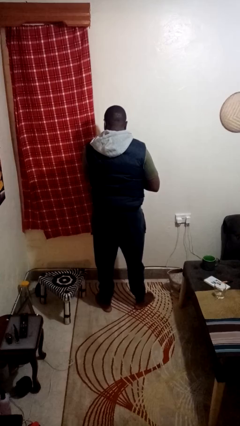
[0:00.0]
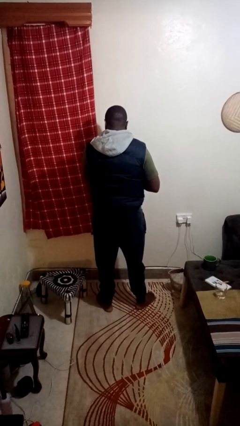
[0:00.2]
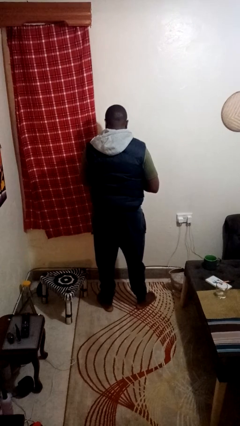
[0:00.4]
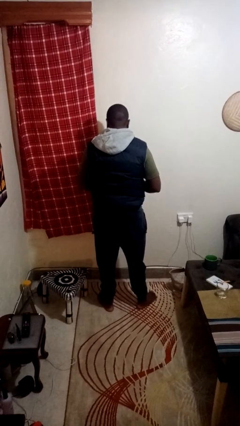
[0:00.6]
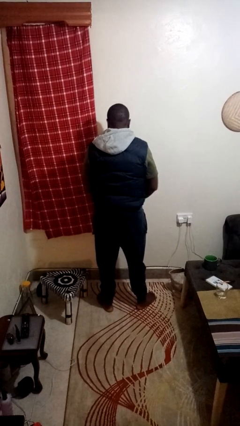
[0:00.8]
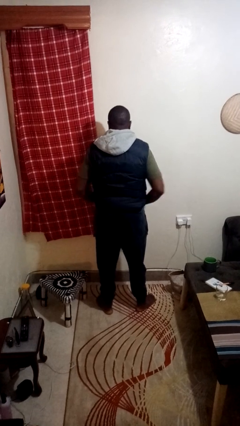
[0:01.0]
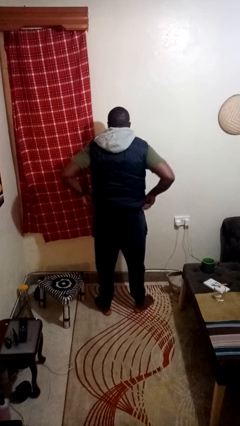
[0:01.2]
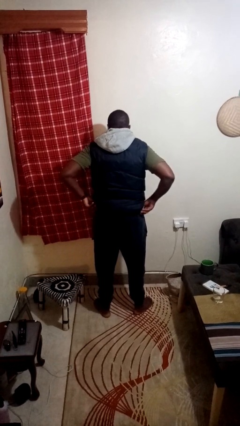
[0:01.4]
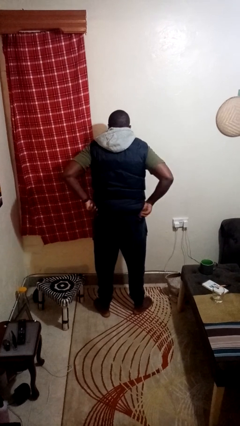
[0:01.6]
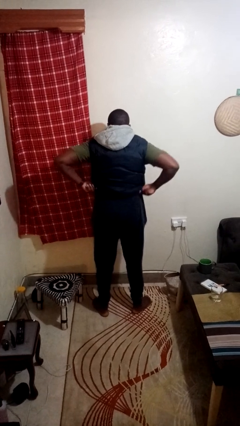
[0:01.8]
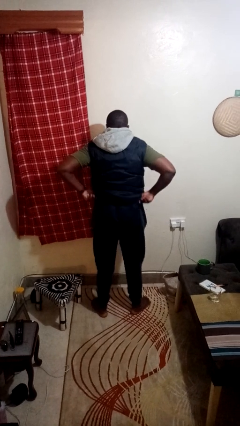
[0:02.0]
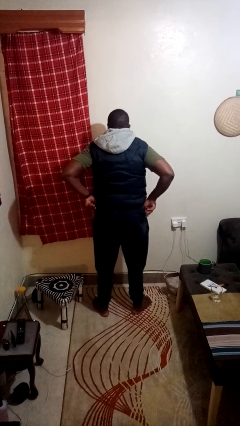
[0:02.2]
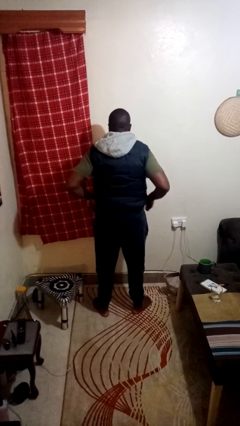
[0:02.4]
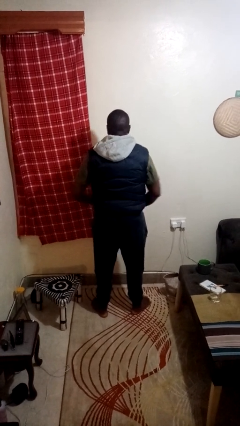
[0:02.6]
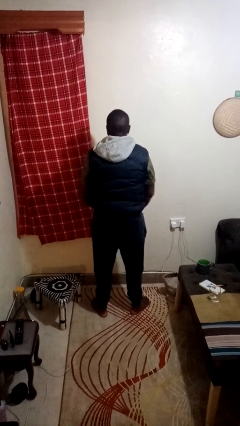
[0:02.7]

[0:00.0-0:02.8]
person hikes up pants

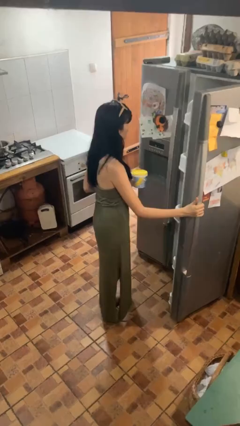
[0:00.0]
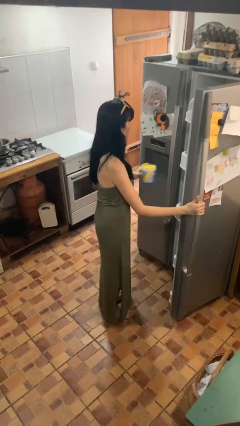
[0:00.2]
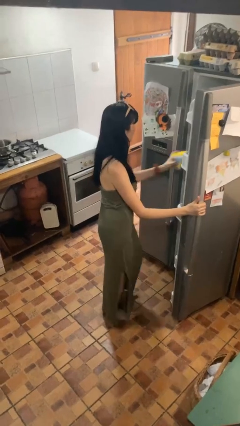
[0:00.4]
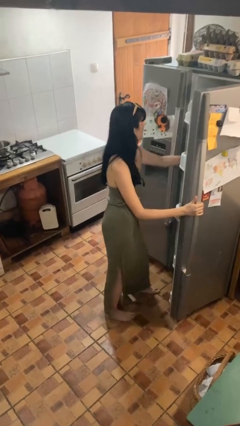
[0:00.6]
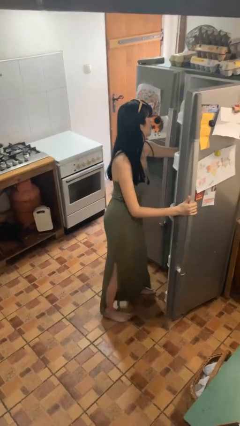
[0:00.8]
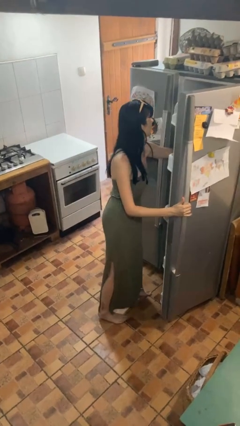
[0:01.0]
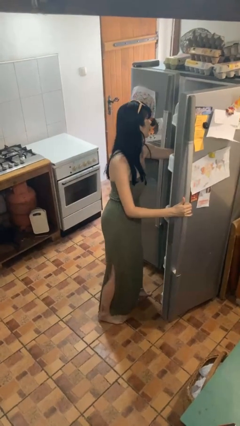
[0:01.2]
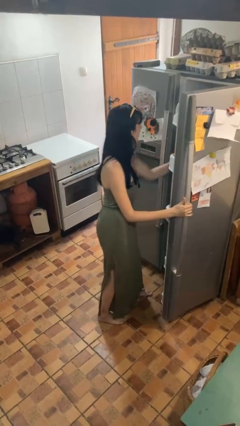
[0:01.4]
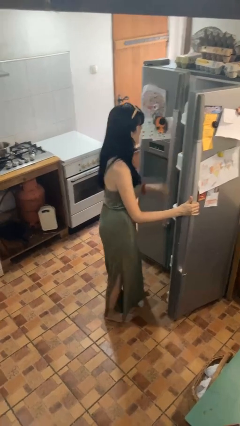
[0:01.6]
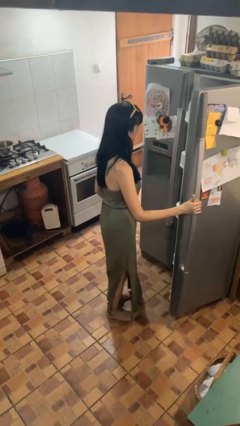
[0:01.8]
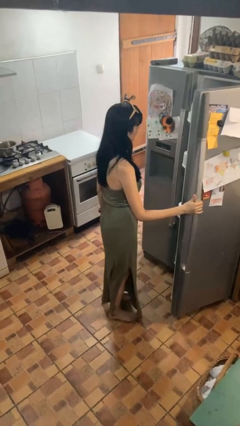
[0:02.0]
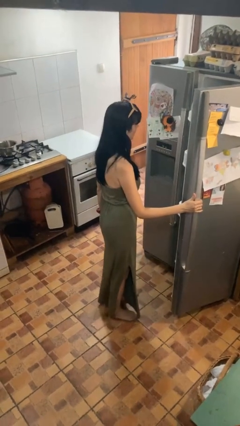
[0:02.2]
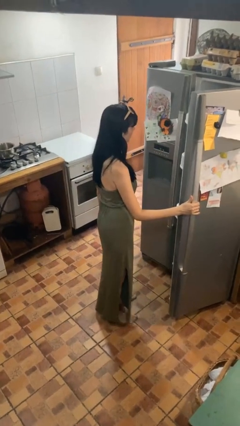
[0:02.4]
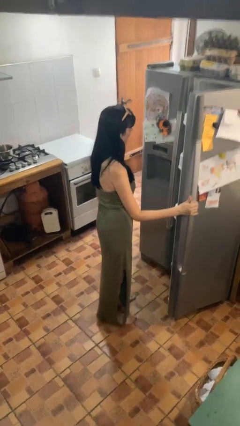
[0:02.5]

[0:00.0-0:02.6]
person puts object into refrigerator

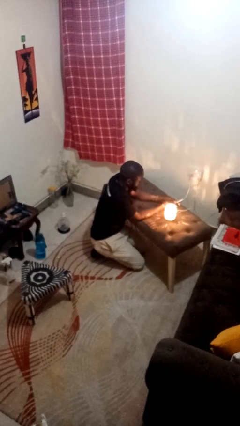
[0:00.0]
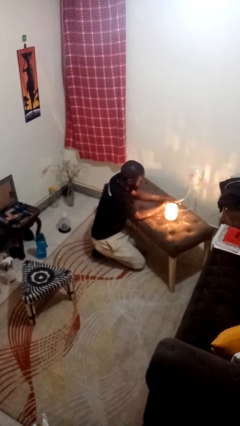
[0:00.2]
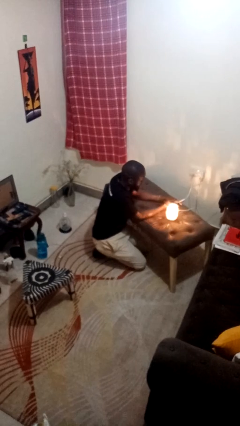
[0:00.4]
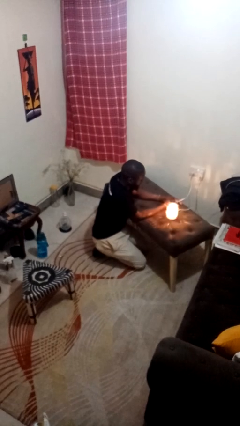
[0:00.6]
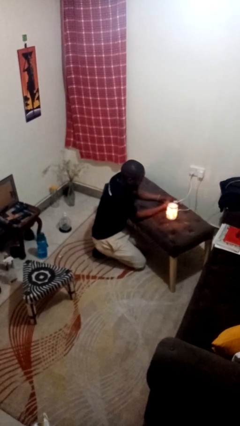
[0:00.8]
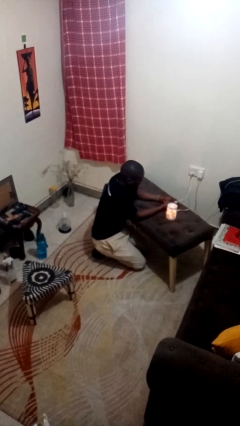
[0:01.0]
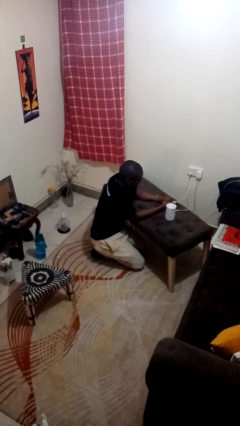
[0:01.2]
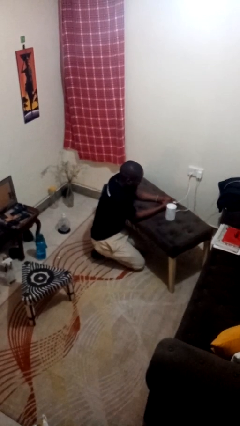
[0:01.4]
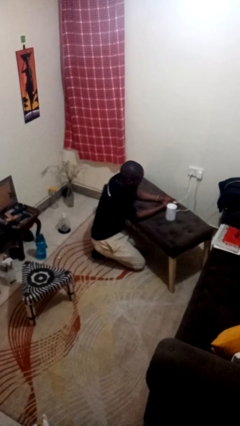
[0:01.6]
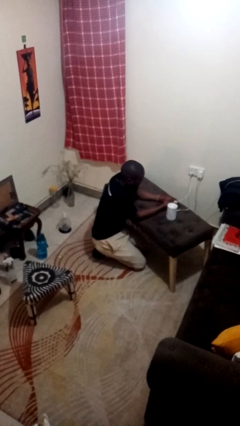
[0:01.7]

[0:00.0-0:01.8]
person turns off lamp

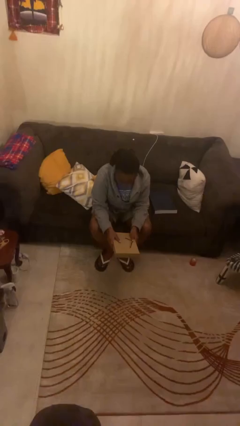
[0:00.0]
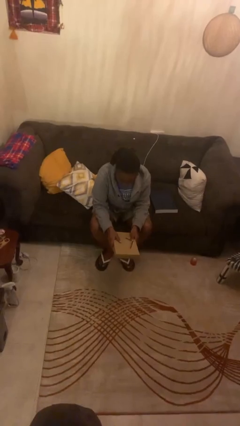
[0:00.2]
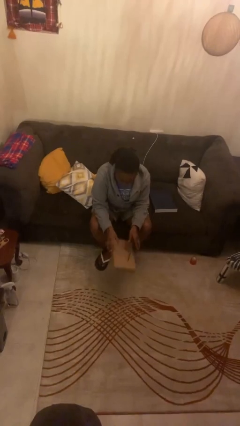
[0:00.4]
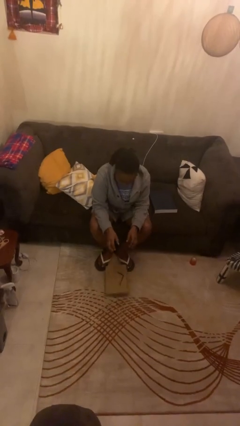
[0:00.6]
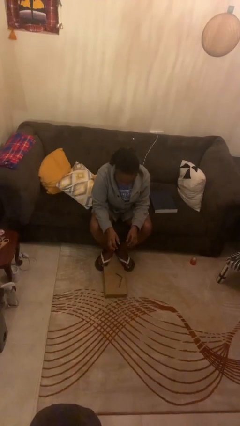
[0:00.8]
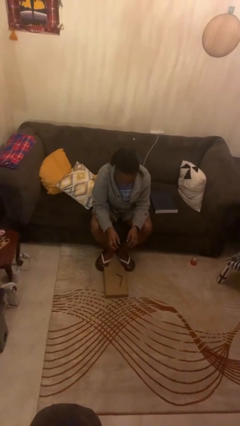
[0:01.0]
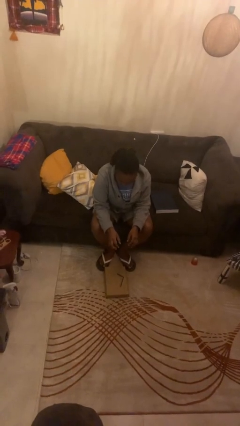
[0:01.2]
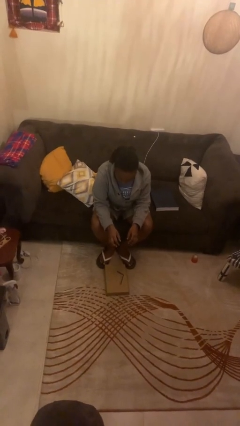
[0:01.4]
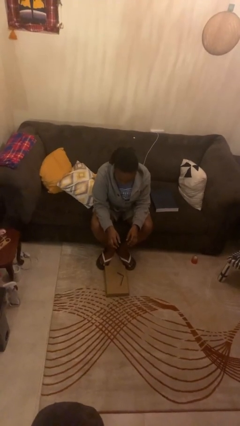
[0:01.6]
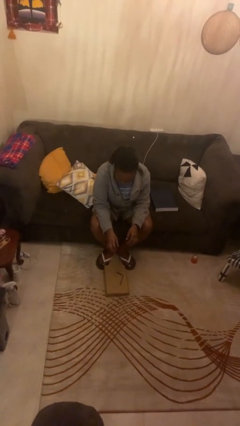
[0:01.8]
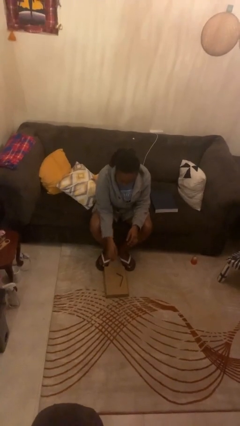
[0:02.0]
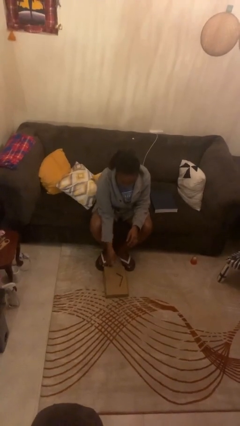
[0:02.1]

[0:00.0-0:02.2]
person drops object

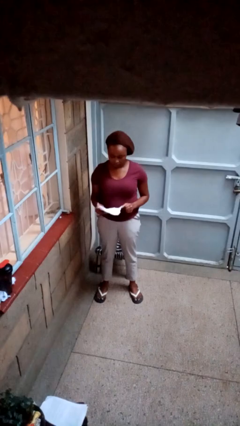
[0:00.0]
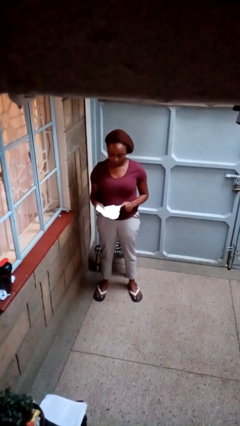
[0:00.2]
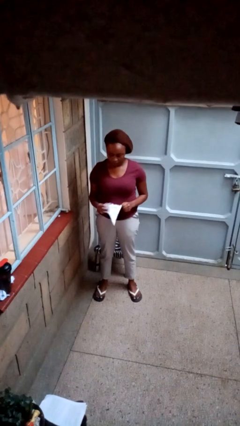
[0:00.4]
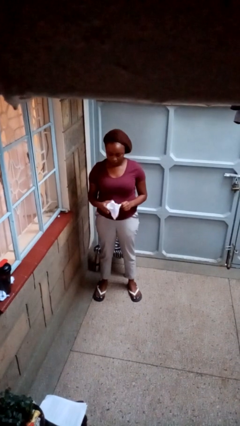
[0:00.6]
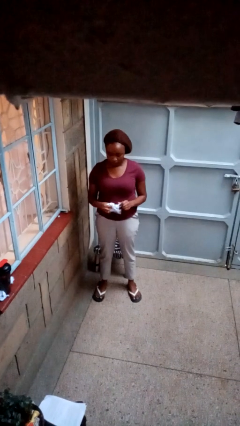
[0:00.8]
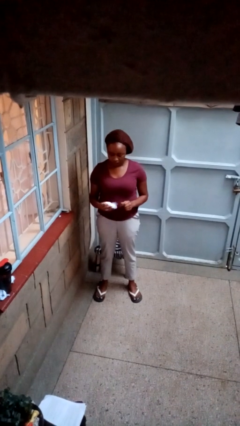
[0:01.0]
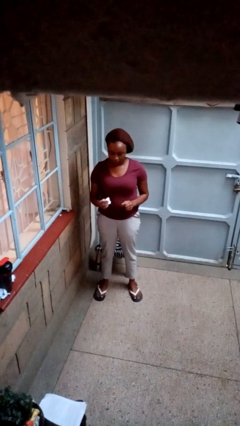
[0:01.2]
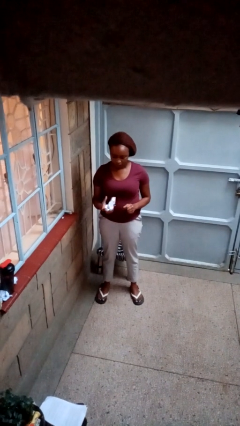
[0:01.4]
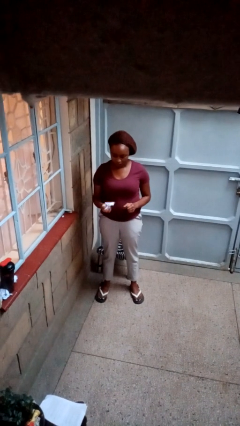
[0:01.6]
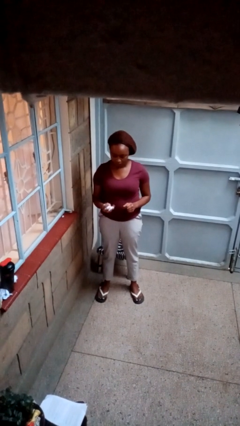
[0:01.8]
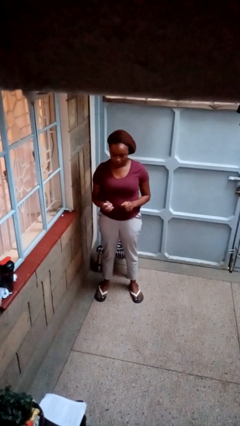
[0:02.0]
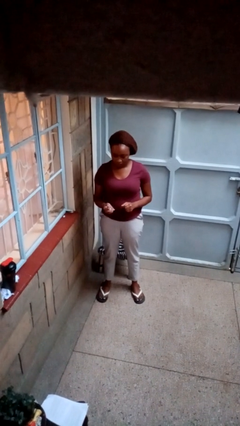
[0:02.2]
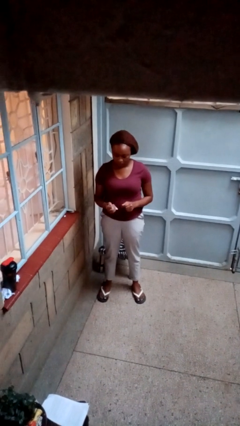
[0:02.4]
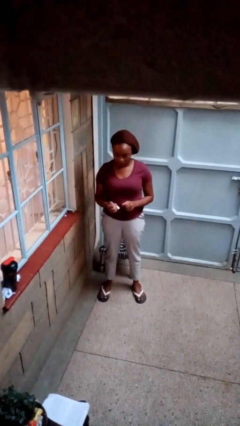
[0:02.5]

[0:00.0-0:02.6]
person crumples paper

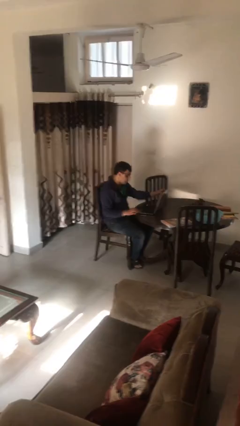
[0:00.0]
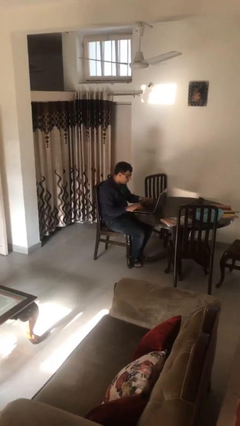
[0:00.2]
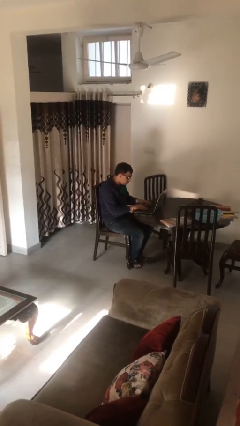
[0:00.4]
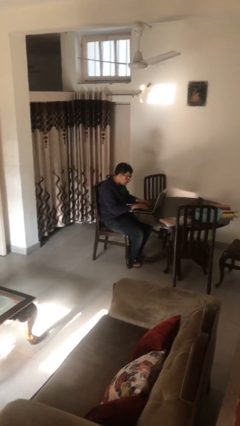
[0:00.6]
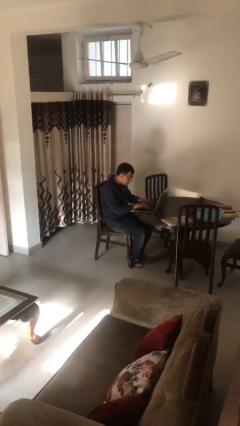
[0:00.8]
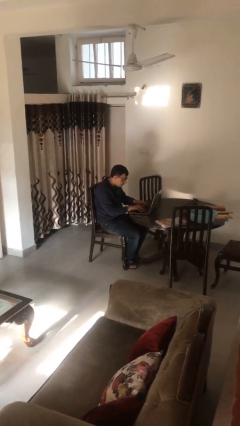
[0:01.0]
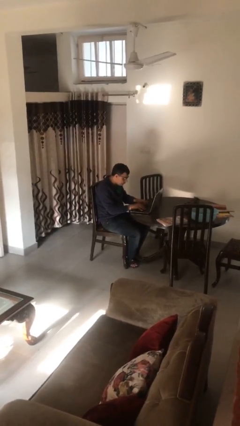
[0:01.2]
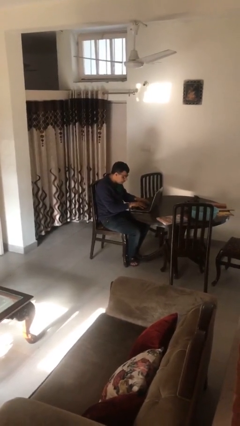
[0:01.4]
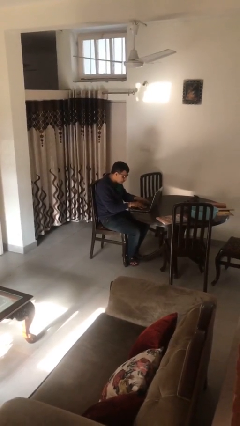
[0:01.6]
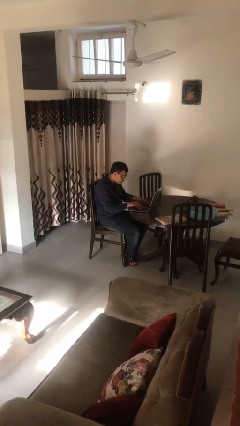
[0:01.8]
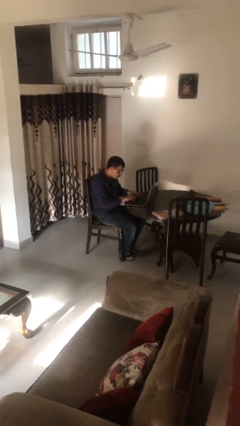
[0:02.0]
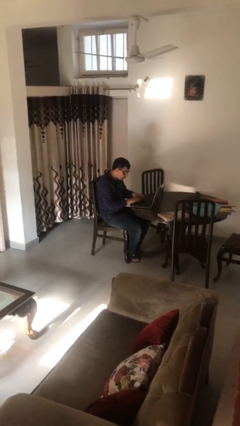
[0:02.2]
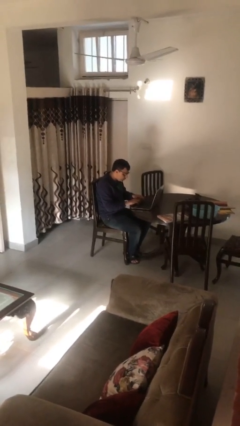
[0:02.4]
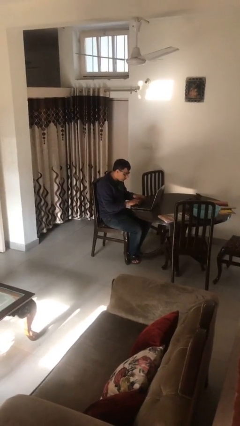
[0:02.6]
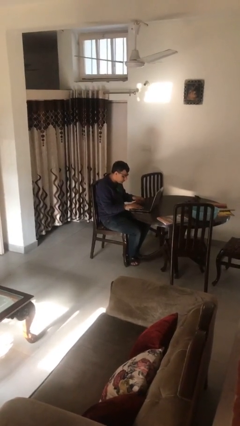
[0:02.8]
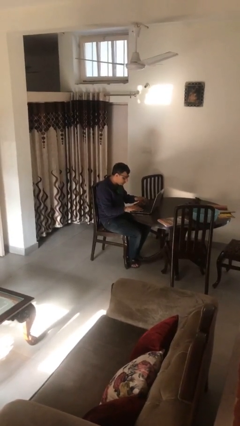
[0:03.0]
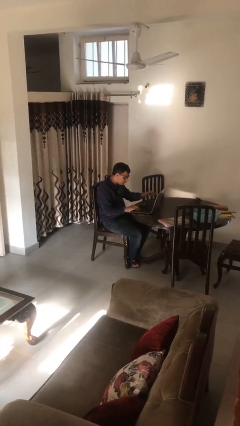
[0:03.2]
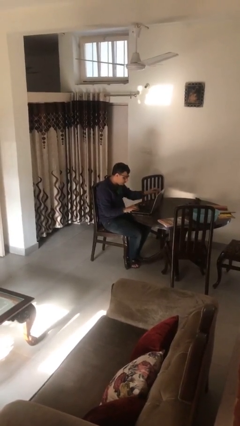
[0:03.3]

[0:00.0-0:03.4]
person interacts with laptop

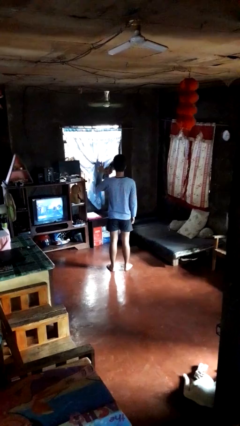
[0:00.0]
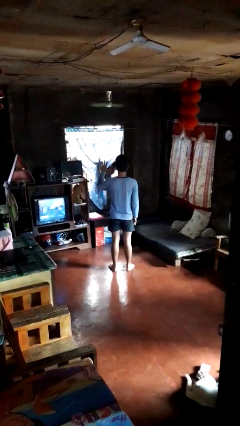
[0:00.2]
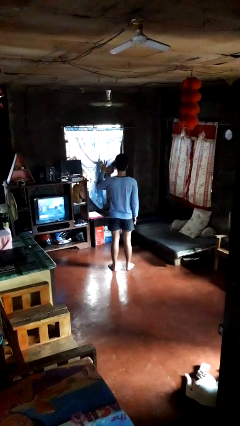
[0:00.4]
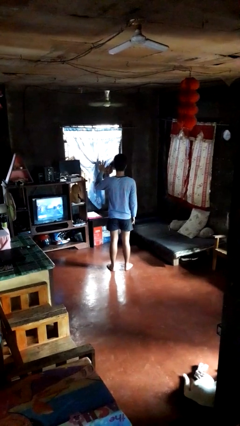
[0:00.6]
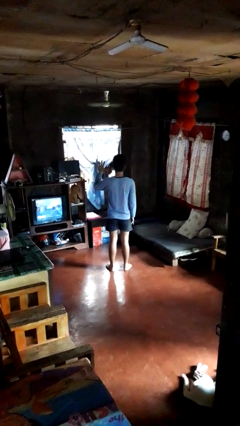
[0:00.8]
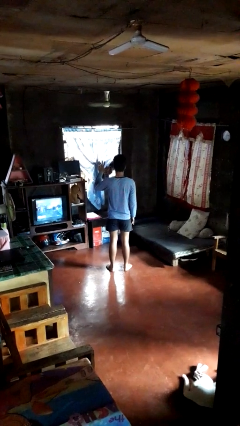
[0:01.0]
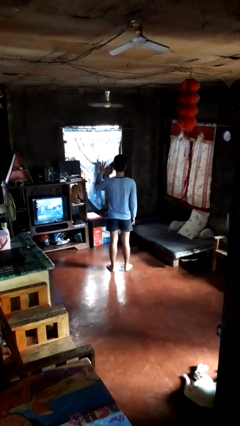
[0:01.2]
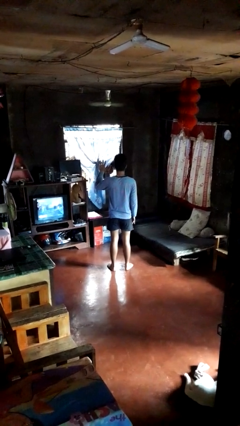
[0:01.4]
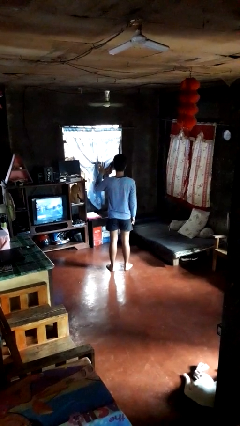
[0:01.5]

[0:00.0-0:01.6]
person gestures number five

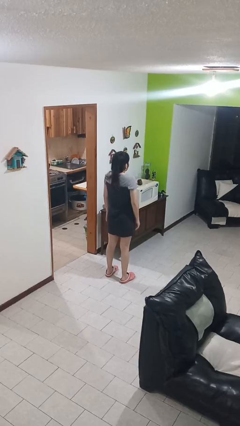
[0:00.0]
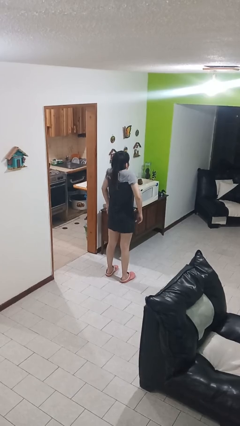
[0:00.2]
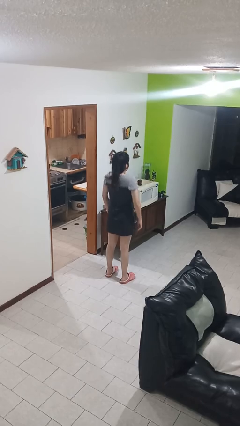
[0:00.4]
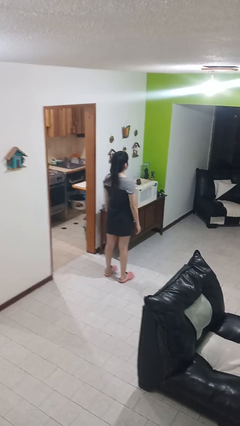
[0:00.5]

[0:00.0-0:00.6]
person shrugs
